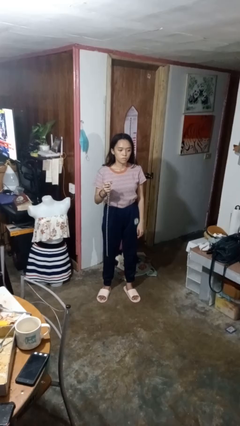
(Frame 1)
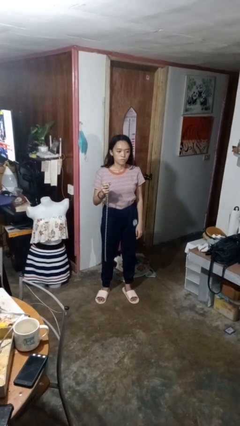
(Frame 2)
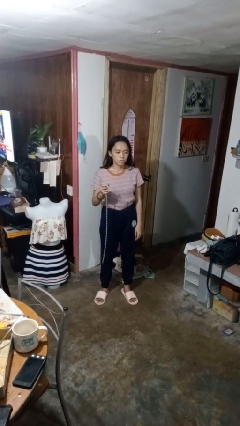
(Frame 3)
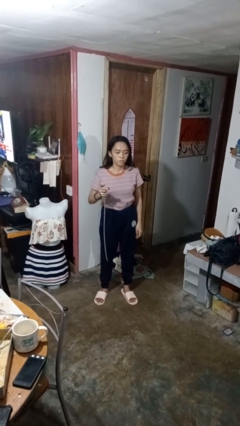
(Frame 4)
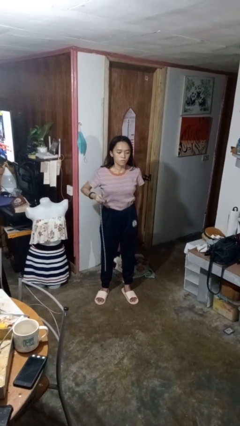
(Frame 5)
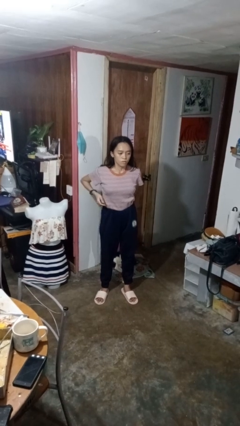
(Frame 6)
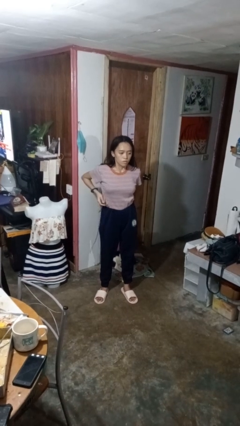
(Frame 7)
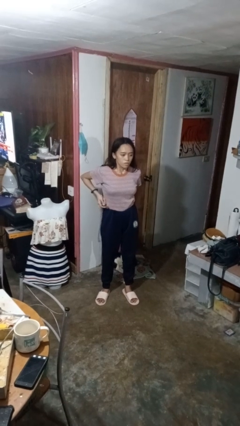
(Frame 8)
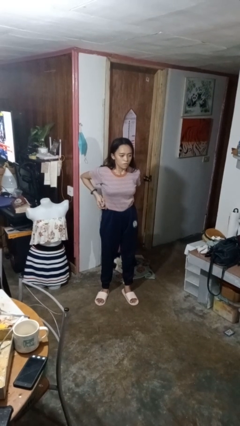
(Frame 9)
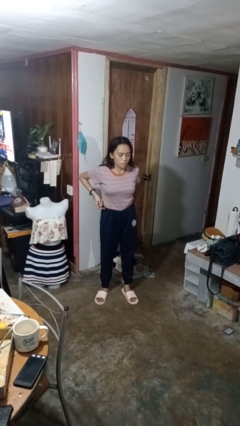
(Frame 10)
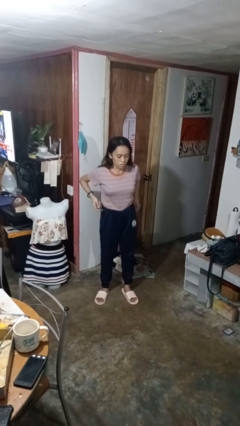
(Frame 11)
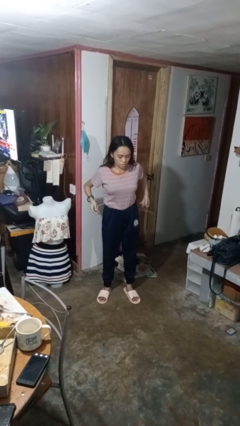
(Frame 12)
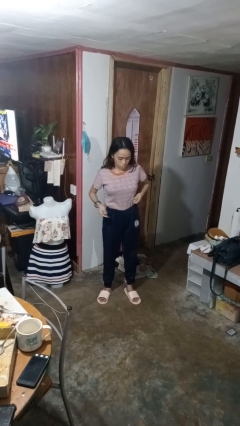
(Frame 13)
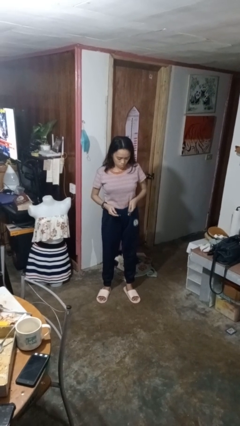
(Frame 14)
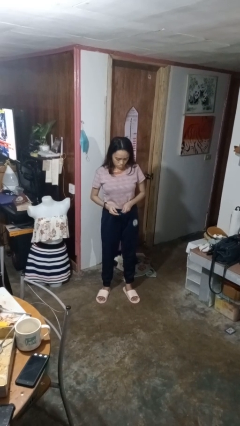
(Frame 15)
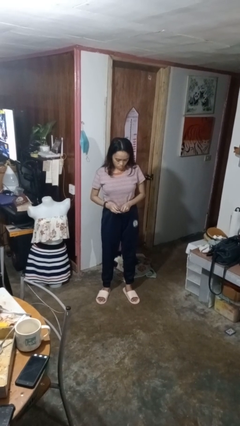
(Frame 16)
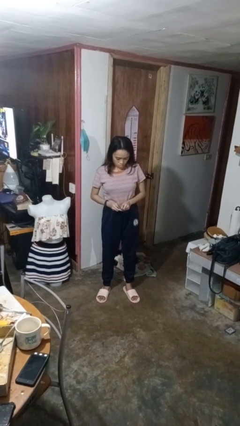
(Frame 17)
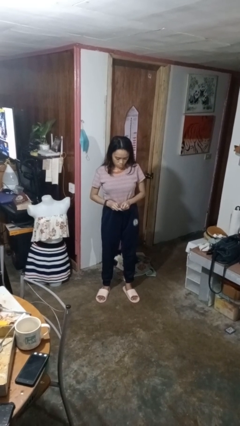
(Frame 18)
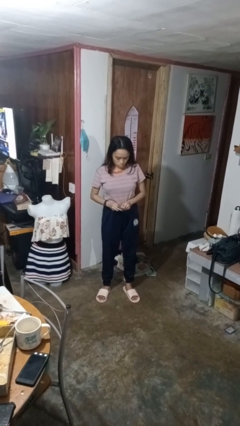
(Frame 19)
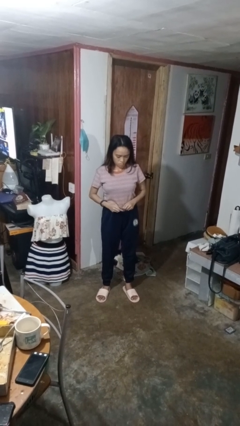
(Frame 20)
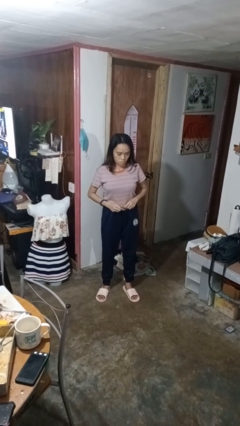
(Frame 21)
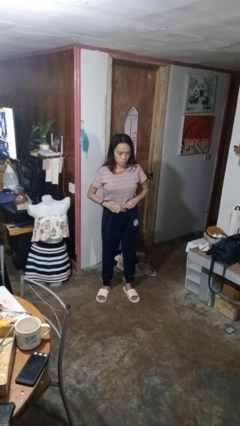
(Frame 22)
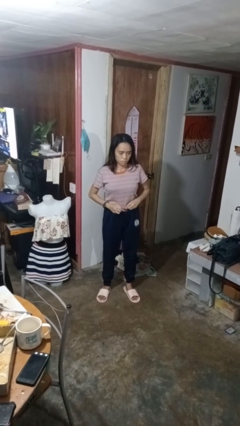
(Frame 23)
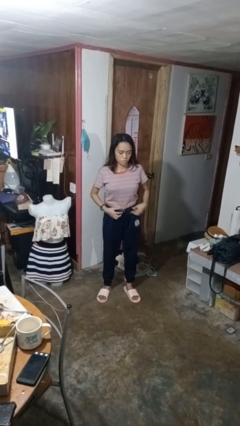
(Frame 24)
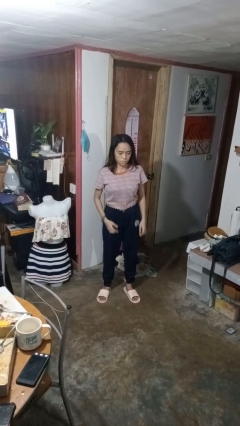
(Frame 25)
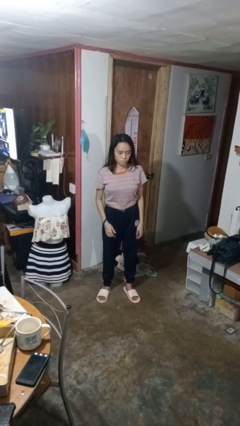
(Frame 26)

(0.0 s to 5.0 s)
person puts on belt

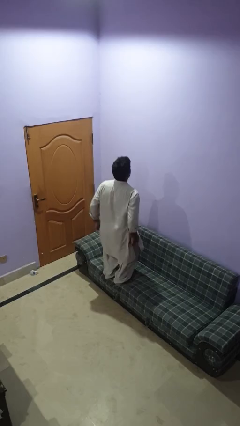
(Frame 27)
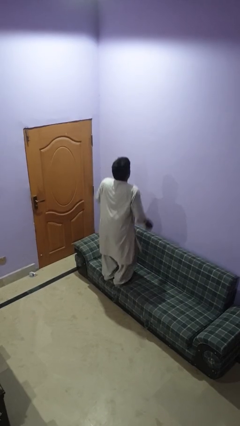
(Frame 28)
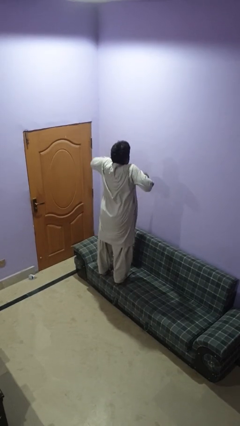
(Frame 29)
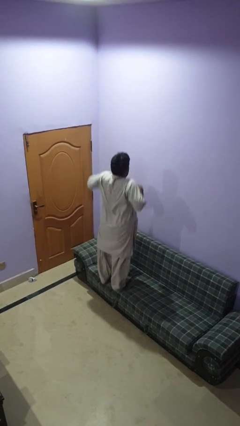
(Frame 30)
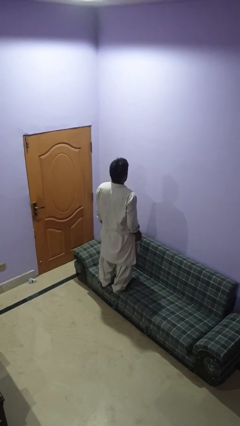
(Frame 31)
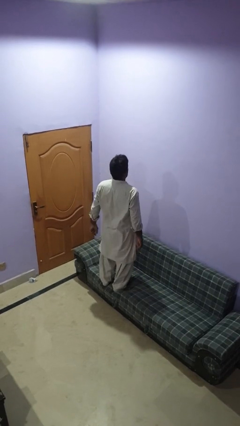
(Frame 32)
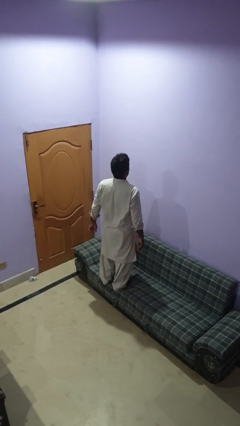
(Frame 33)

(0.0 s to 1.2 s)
person jumps on couch

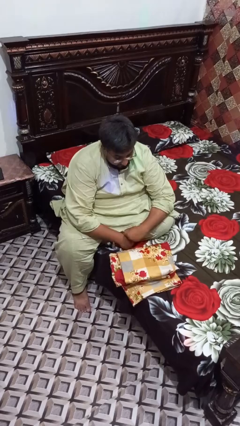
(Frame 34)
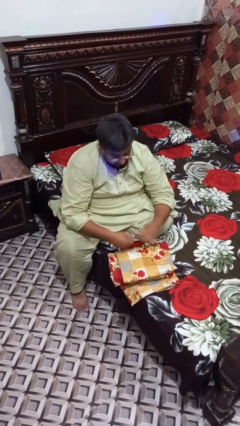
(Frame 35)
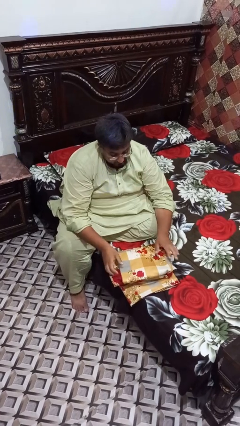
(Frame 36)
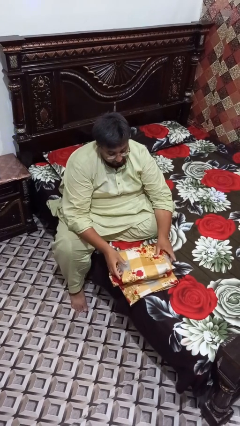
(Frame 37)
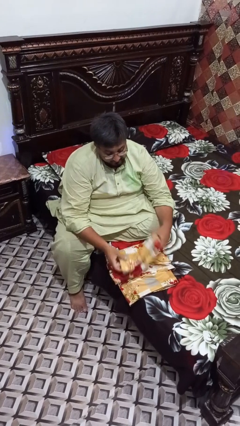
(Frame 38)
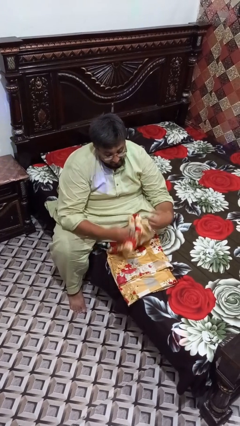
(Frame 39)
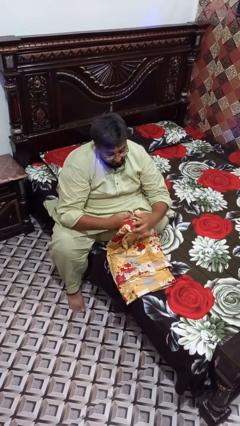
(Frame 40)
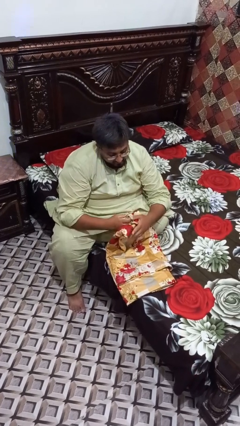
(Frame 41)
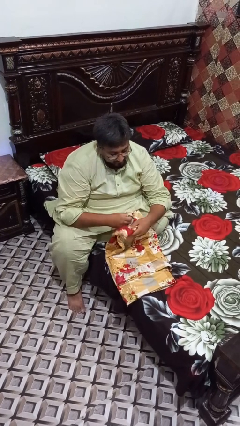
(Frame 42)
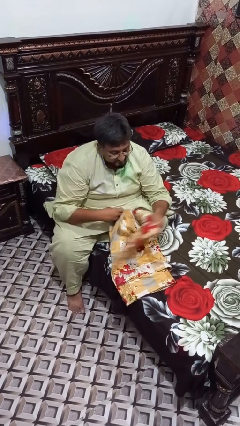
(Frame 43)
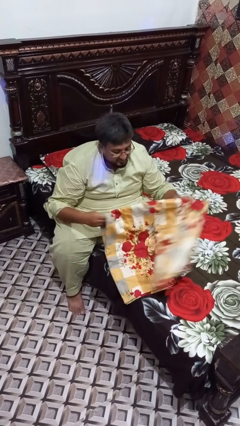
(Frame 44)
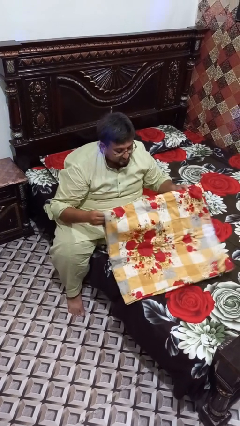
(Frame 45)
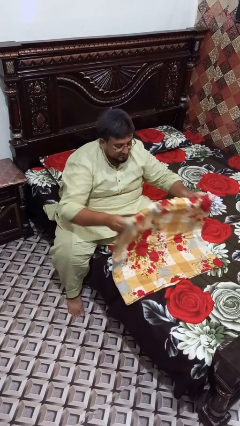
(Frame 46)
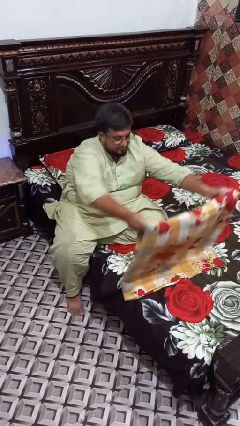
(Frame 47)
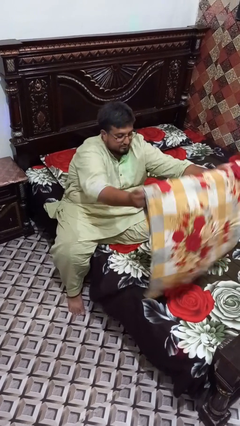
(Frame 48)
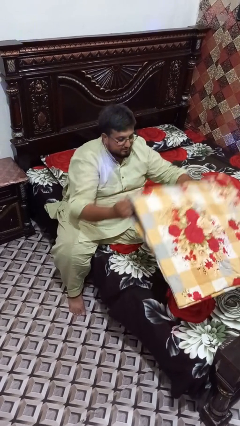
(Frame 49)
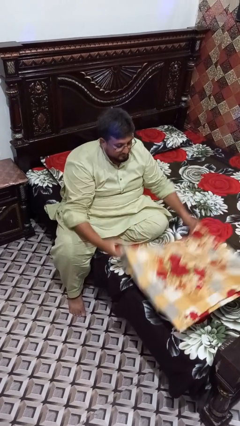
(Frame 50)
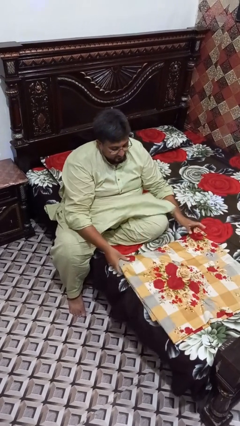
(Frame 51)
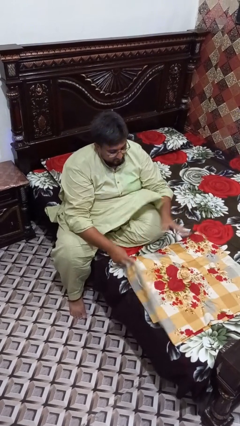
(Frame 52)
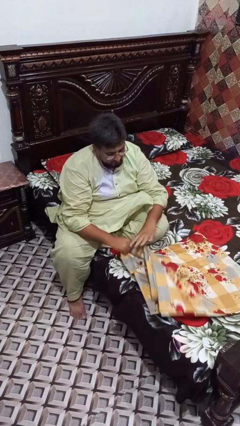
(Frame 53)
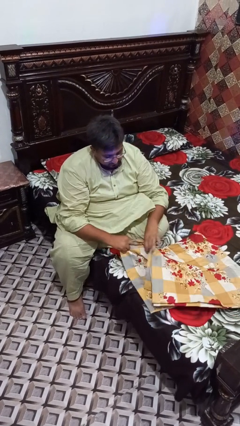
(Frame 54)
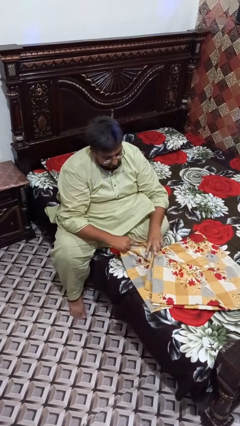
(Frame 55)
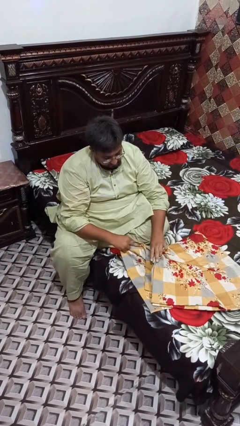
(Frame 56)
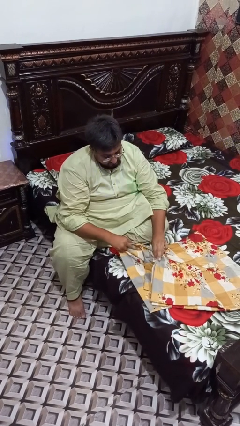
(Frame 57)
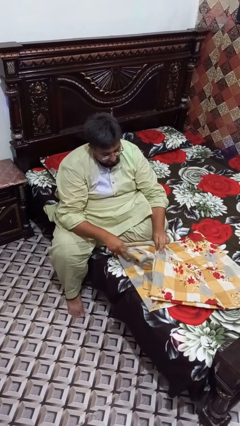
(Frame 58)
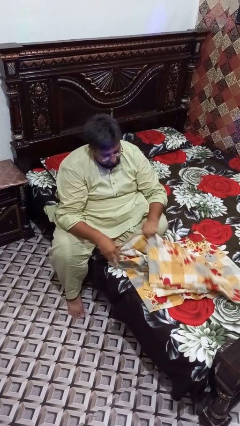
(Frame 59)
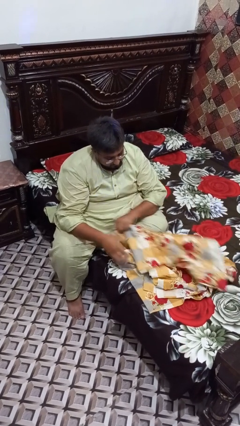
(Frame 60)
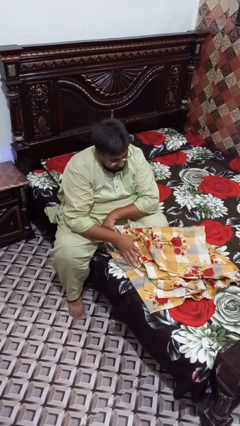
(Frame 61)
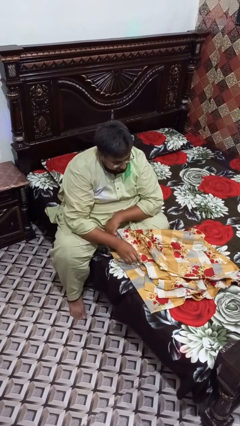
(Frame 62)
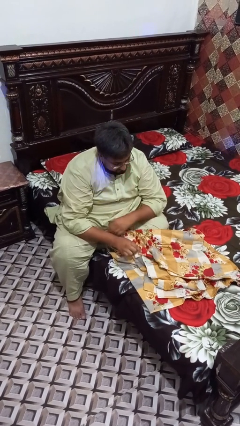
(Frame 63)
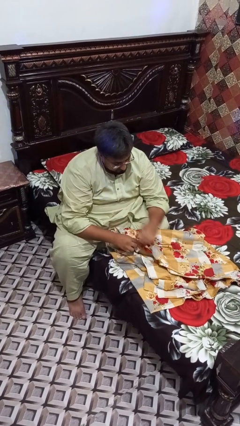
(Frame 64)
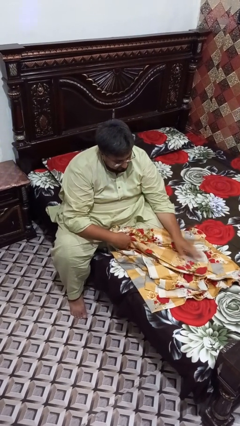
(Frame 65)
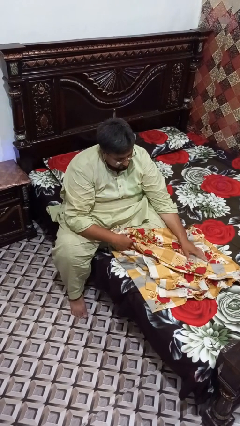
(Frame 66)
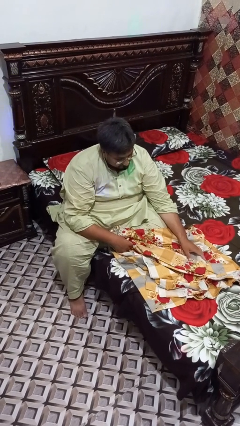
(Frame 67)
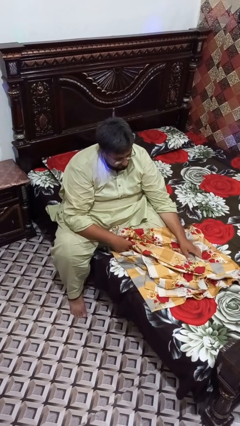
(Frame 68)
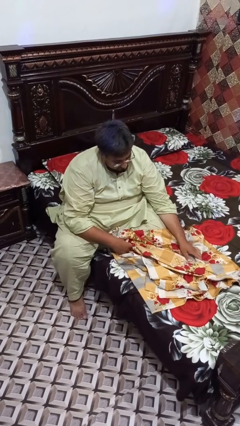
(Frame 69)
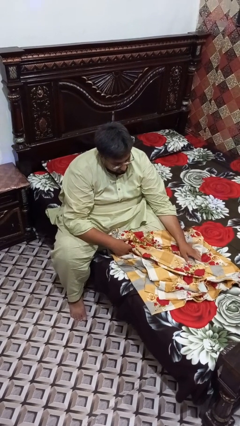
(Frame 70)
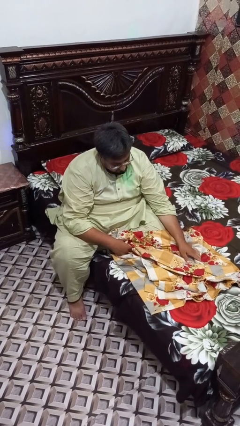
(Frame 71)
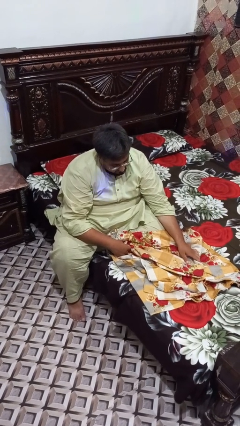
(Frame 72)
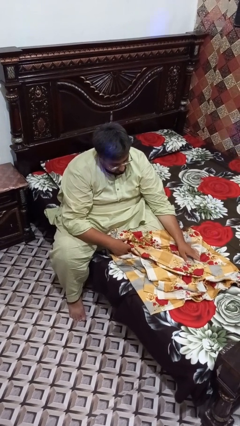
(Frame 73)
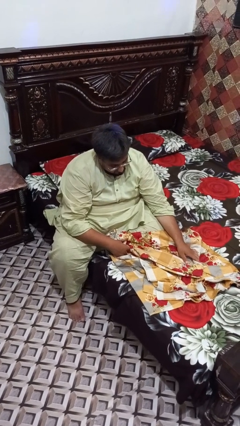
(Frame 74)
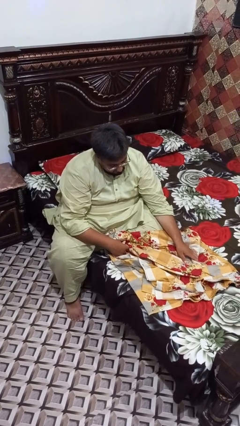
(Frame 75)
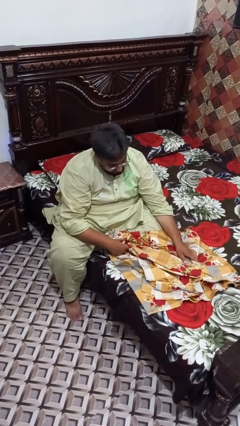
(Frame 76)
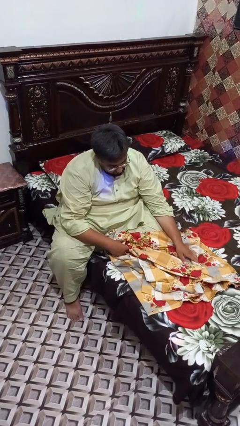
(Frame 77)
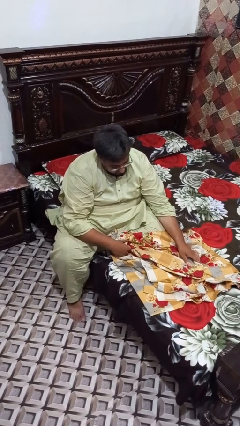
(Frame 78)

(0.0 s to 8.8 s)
person unfolds blanket

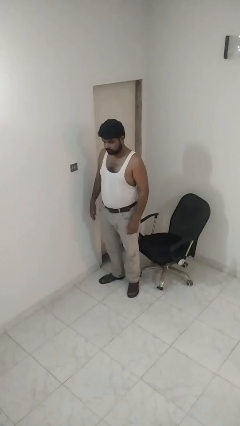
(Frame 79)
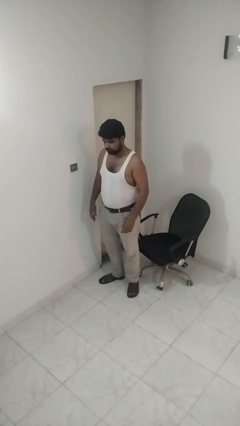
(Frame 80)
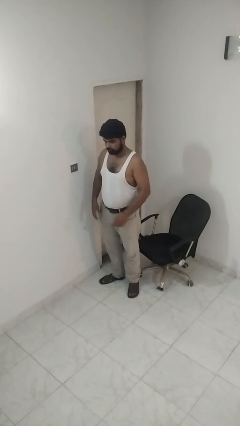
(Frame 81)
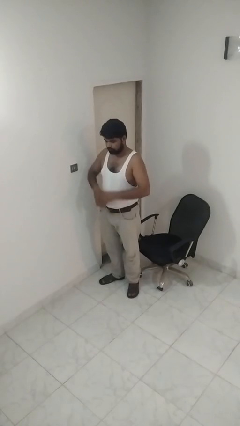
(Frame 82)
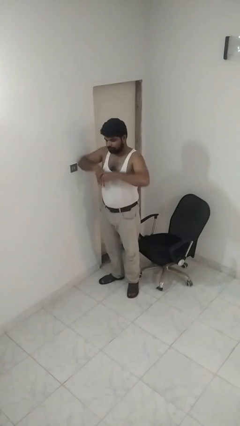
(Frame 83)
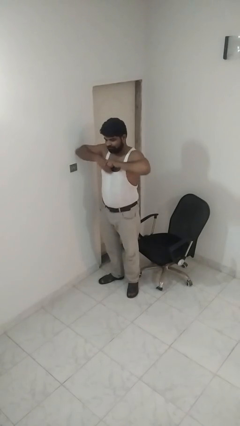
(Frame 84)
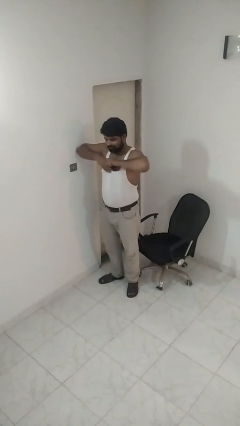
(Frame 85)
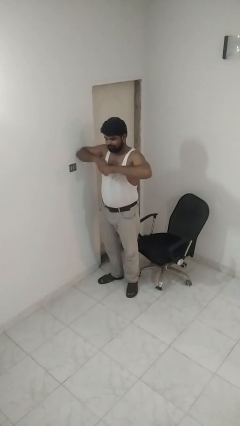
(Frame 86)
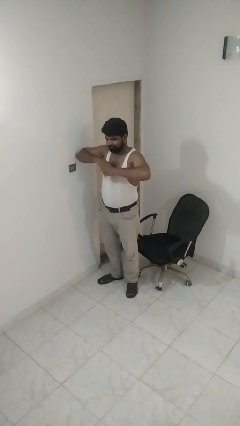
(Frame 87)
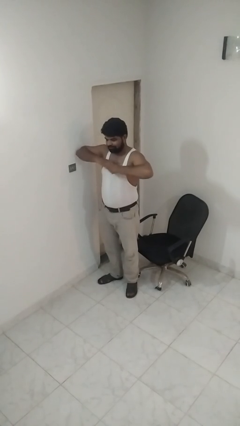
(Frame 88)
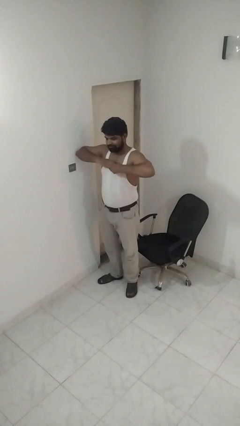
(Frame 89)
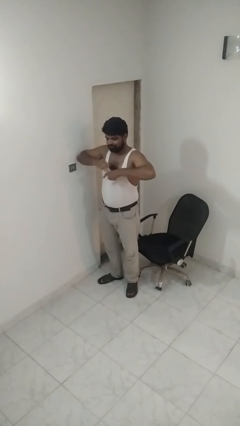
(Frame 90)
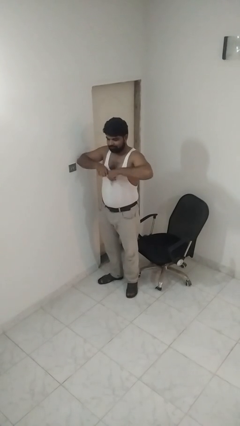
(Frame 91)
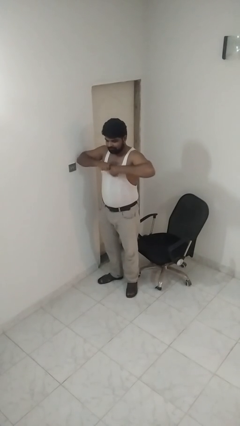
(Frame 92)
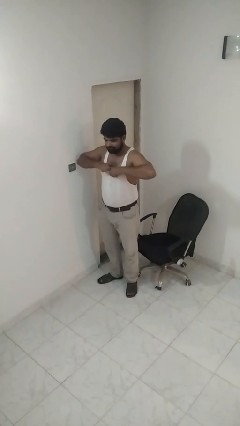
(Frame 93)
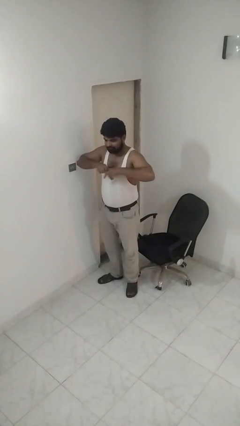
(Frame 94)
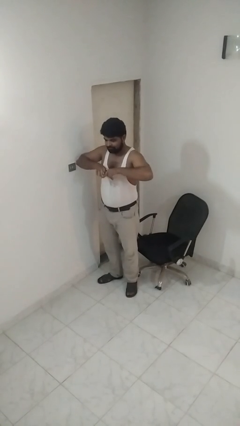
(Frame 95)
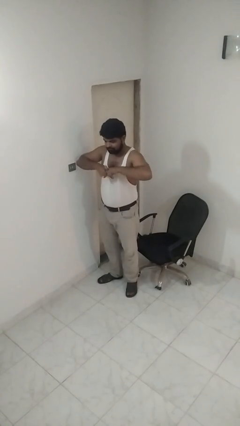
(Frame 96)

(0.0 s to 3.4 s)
person cracks knuckles
